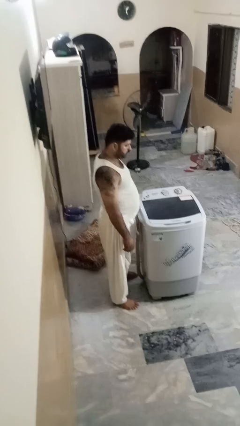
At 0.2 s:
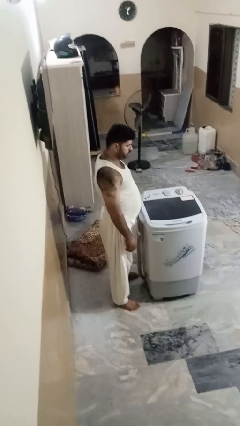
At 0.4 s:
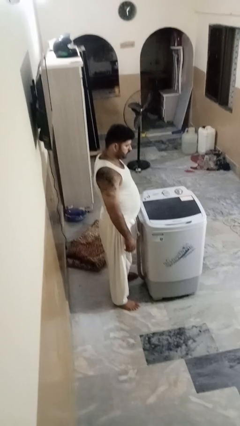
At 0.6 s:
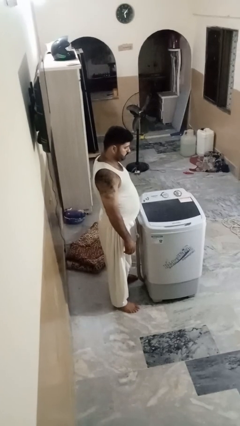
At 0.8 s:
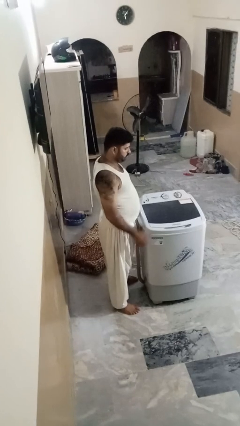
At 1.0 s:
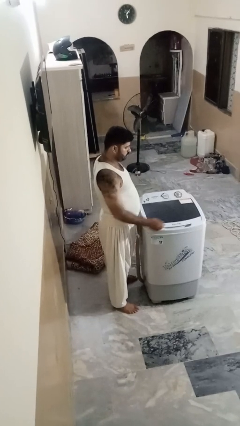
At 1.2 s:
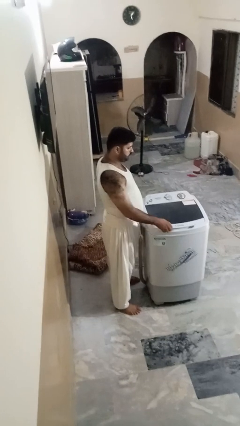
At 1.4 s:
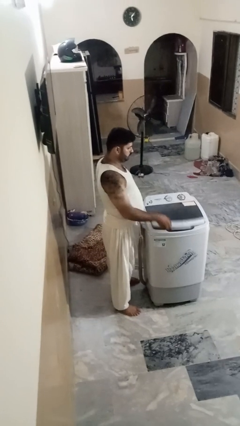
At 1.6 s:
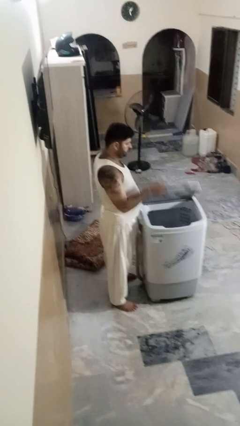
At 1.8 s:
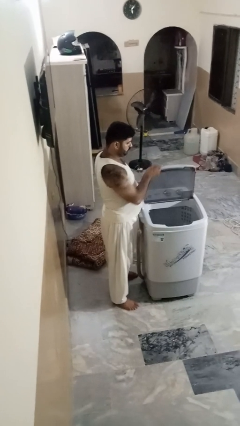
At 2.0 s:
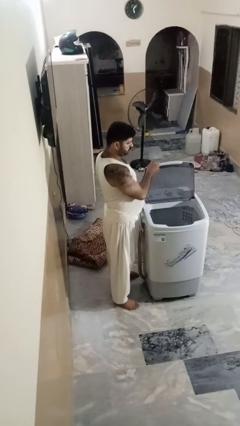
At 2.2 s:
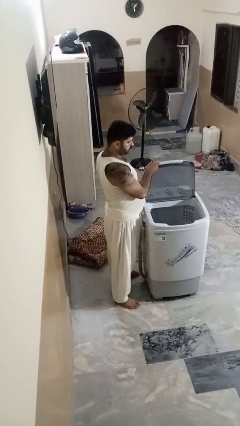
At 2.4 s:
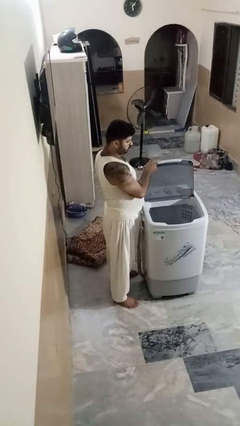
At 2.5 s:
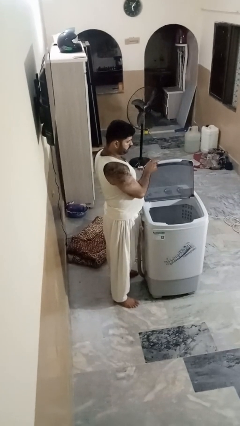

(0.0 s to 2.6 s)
person opens clothes washer

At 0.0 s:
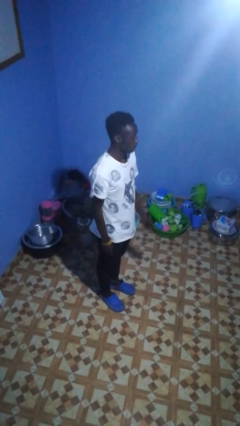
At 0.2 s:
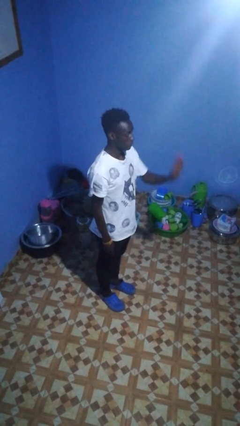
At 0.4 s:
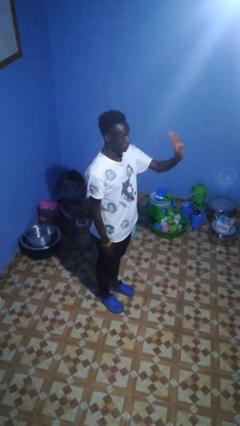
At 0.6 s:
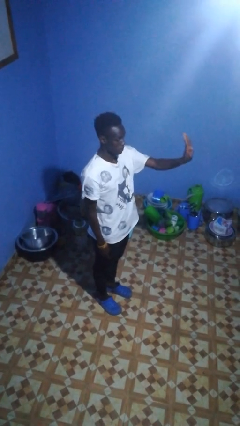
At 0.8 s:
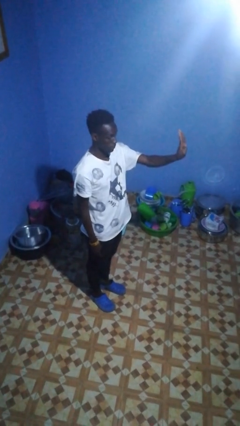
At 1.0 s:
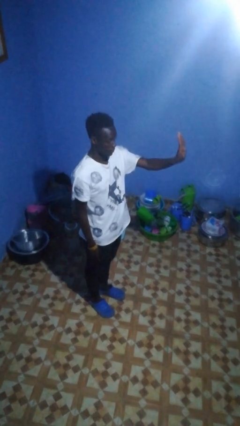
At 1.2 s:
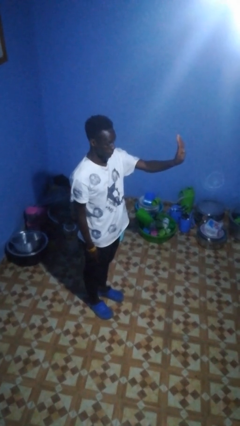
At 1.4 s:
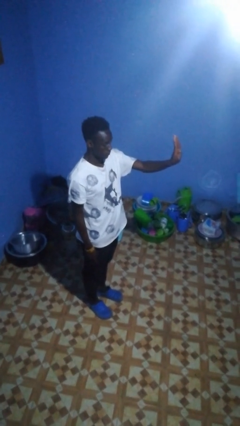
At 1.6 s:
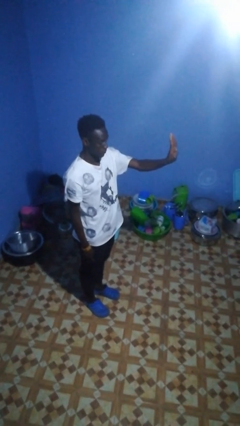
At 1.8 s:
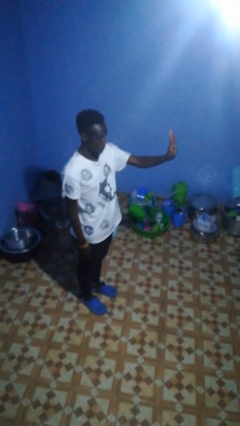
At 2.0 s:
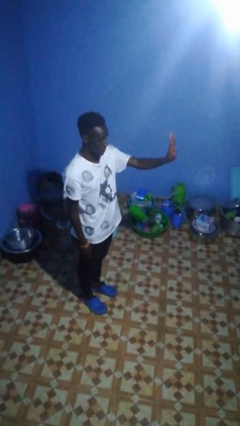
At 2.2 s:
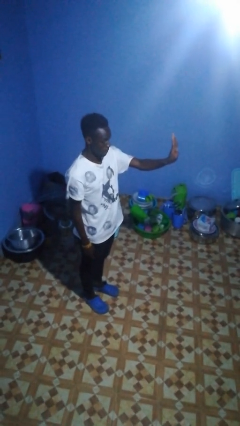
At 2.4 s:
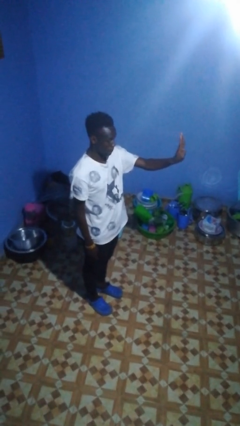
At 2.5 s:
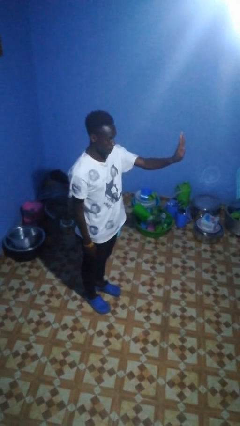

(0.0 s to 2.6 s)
person gestures number four

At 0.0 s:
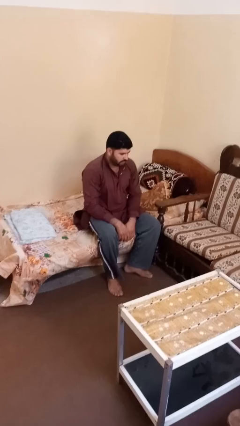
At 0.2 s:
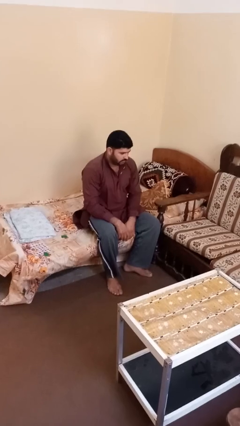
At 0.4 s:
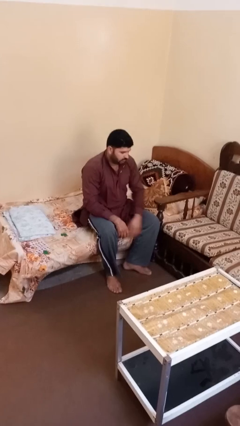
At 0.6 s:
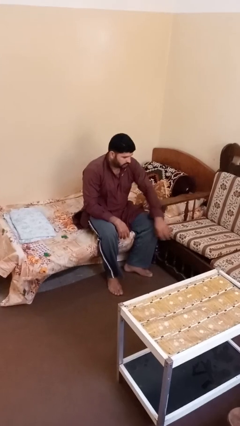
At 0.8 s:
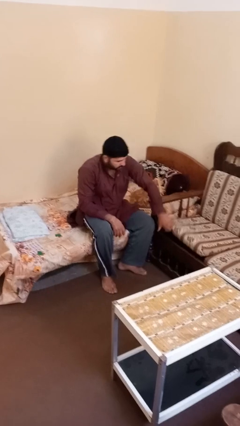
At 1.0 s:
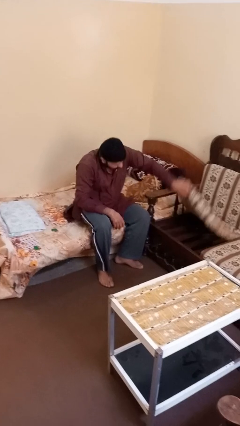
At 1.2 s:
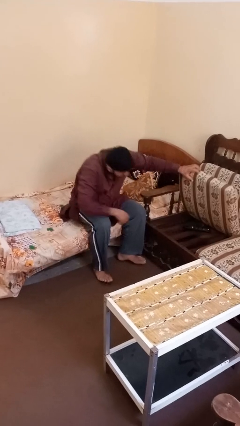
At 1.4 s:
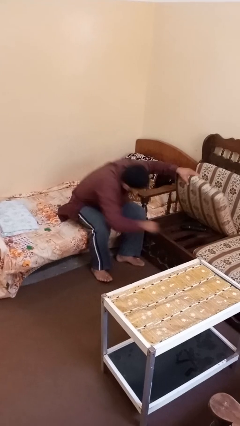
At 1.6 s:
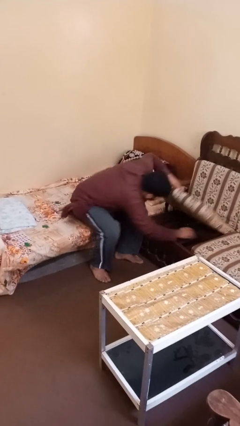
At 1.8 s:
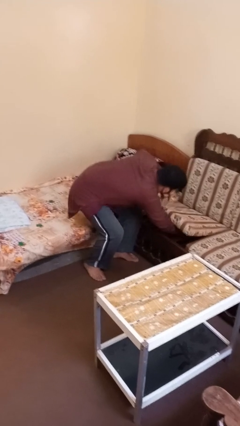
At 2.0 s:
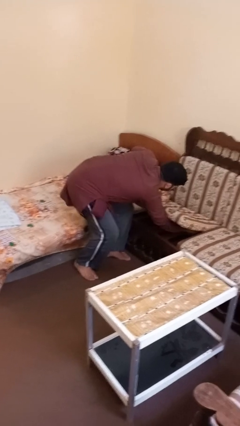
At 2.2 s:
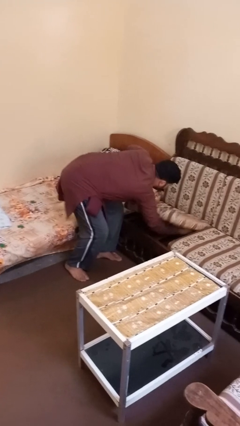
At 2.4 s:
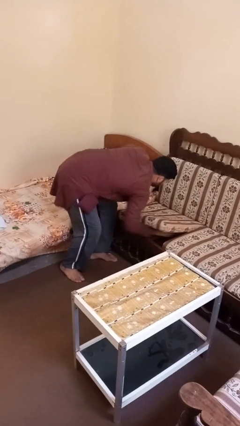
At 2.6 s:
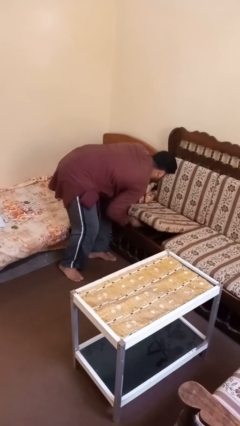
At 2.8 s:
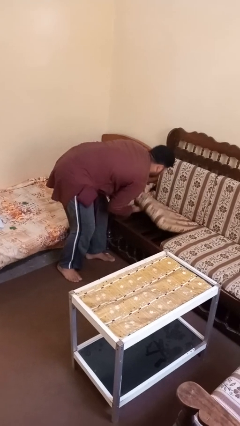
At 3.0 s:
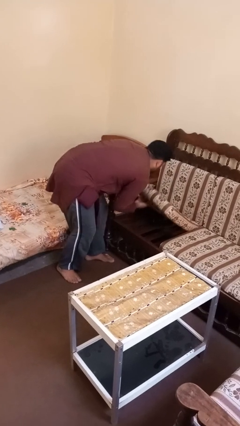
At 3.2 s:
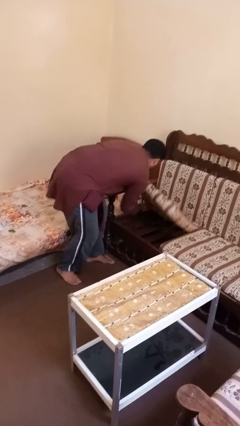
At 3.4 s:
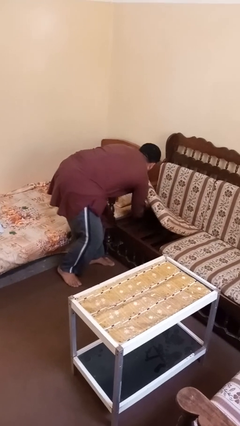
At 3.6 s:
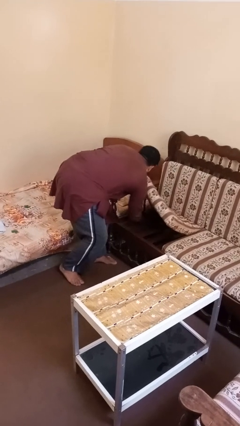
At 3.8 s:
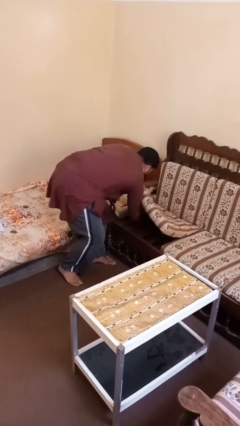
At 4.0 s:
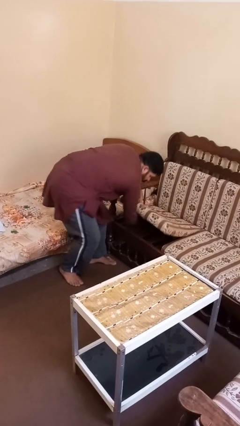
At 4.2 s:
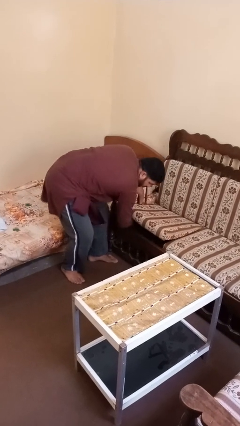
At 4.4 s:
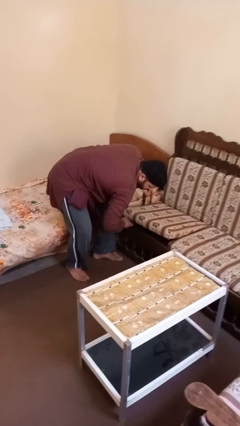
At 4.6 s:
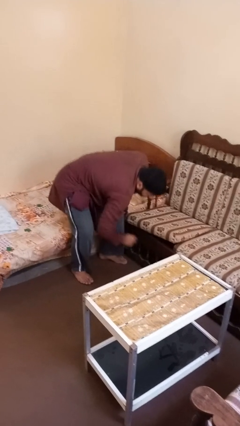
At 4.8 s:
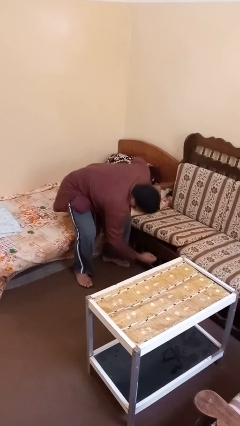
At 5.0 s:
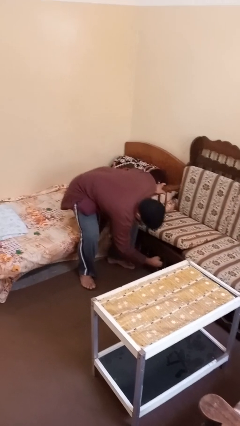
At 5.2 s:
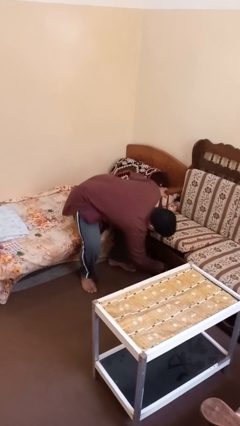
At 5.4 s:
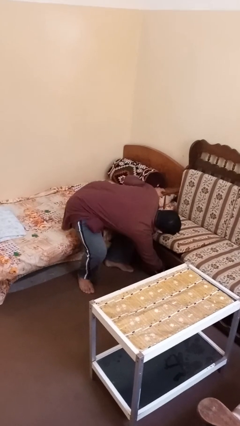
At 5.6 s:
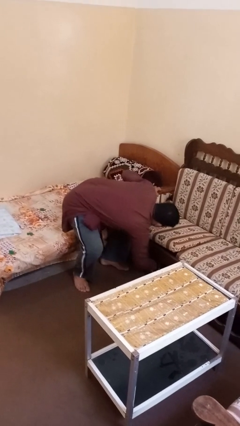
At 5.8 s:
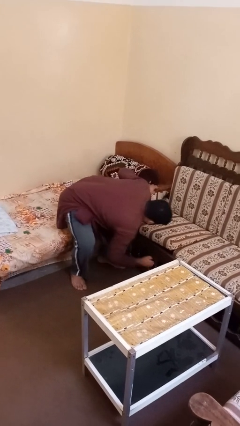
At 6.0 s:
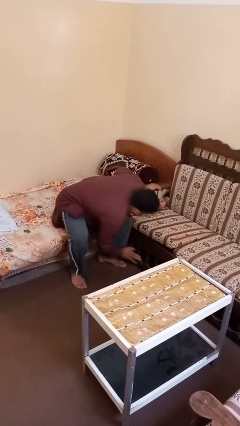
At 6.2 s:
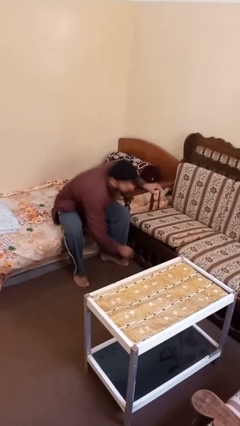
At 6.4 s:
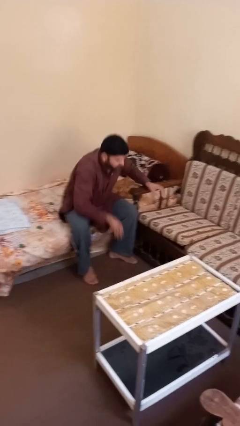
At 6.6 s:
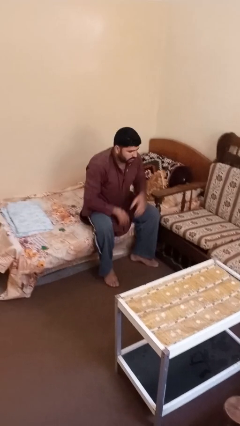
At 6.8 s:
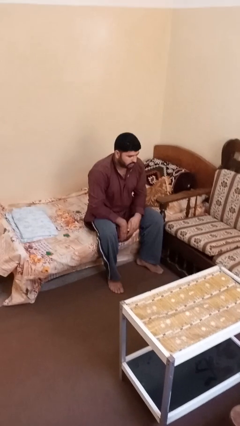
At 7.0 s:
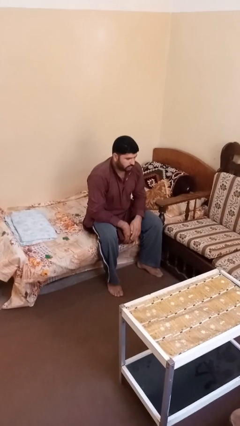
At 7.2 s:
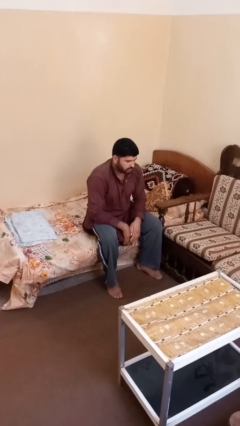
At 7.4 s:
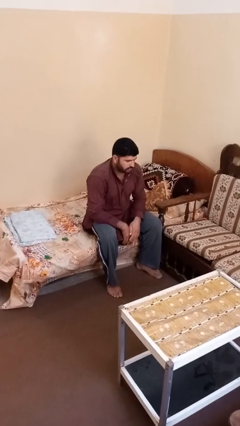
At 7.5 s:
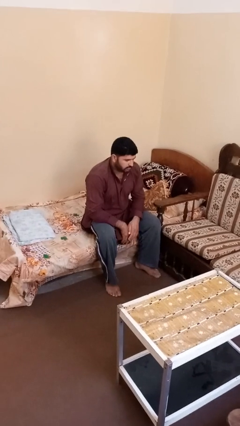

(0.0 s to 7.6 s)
person searches under couch

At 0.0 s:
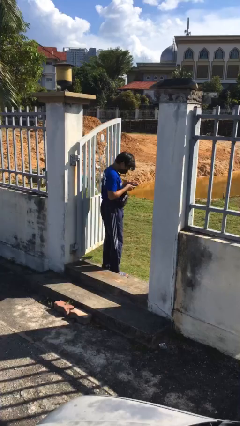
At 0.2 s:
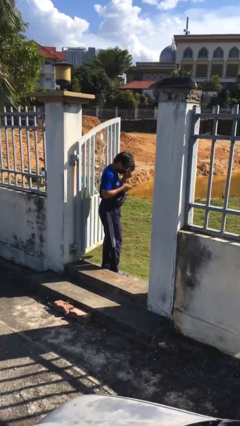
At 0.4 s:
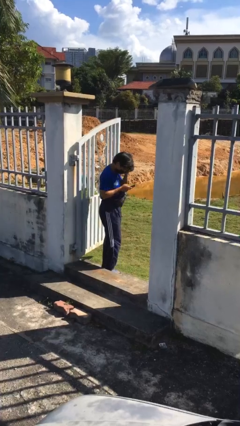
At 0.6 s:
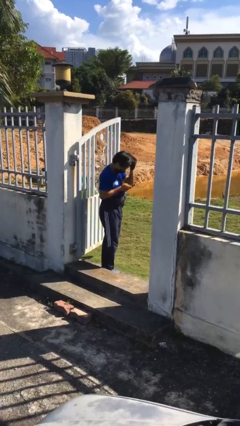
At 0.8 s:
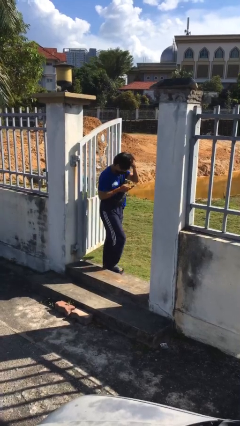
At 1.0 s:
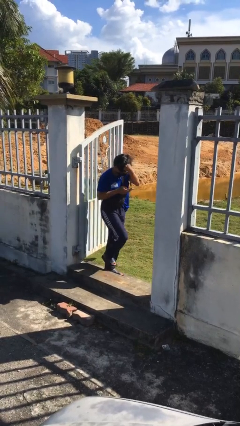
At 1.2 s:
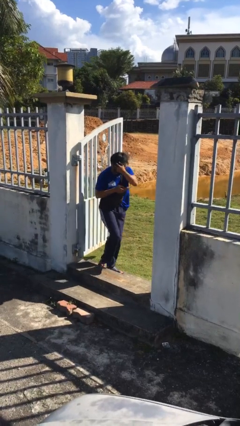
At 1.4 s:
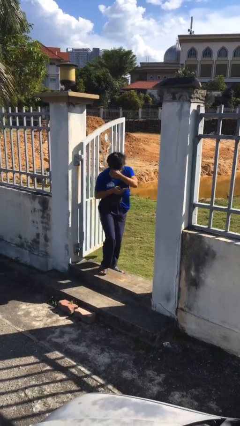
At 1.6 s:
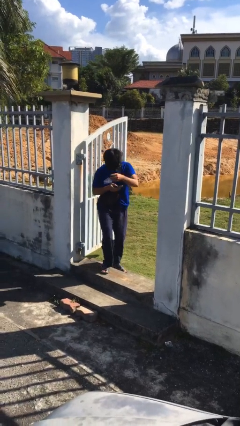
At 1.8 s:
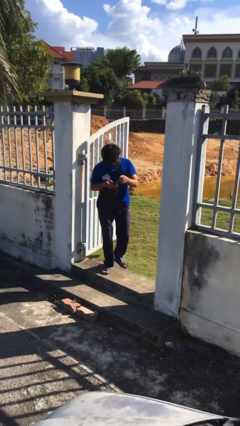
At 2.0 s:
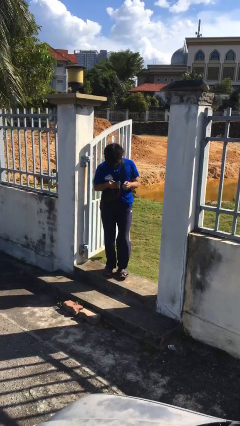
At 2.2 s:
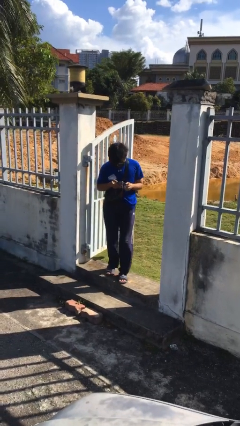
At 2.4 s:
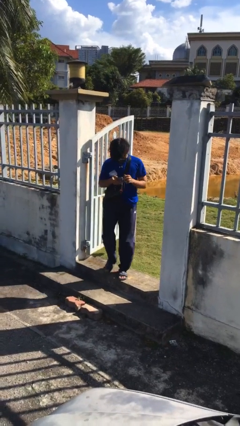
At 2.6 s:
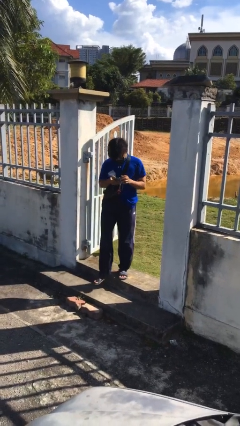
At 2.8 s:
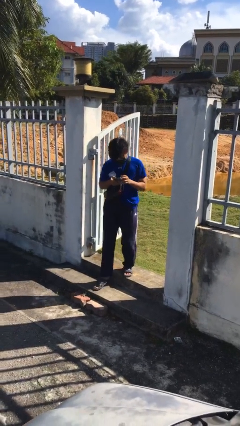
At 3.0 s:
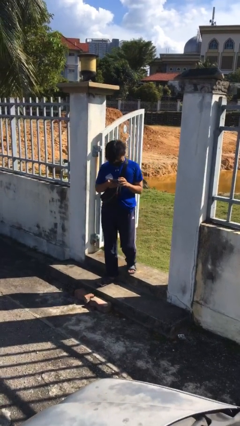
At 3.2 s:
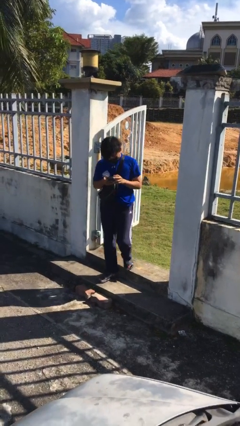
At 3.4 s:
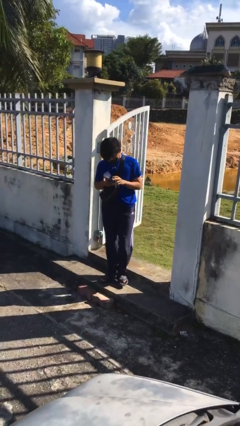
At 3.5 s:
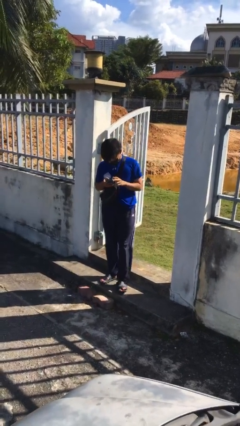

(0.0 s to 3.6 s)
person enters scene through structure

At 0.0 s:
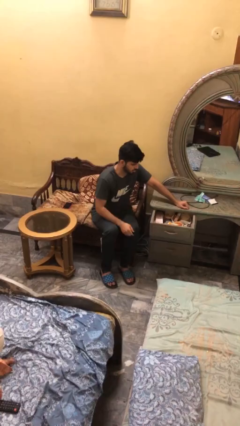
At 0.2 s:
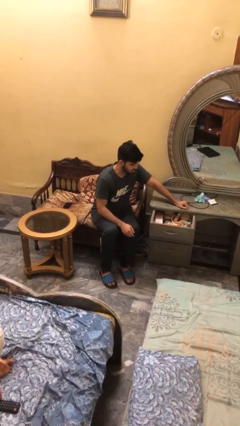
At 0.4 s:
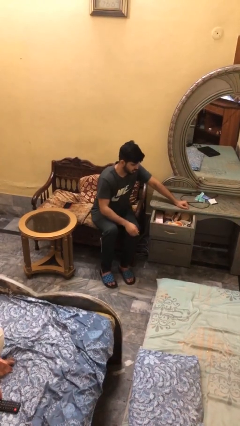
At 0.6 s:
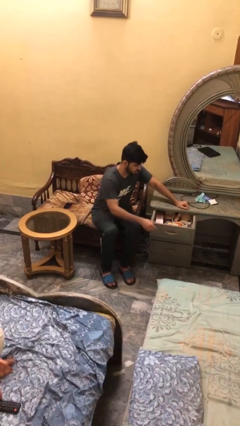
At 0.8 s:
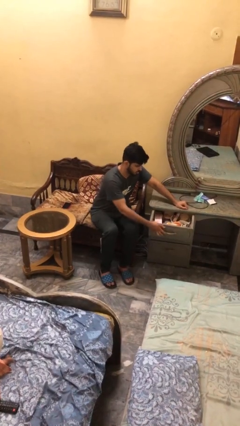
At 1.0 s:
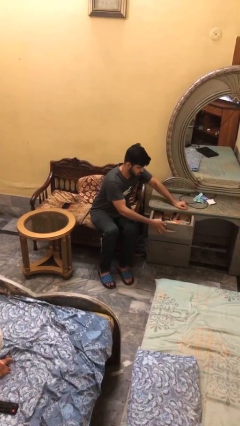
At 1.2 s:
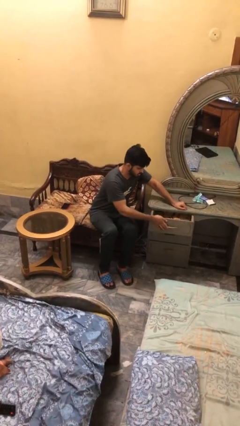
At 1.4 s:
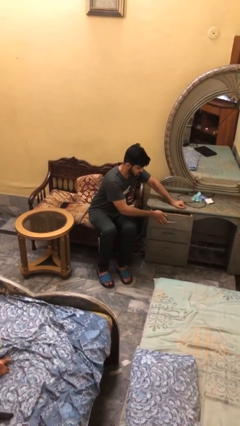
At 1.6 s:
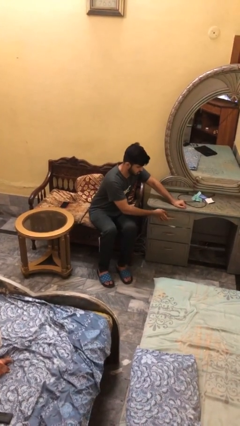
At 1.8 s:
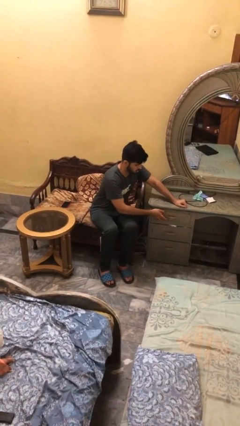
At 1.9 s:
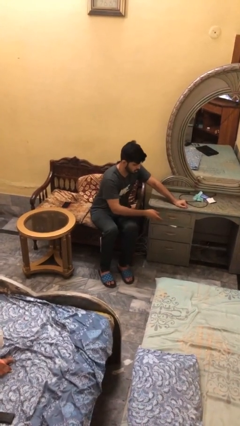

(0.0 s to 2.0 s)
person closes dresser drawer
